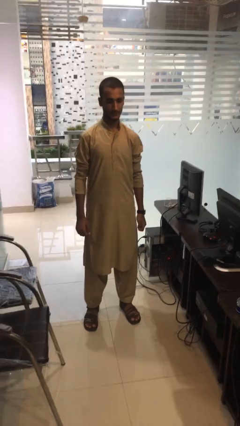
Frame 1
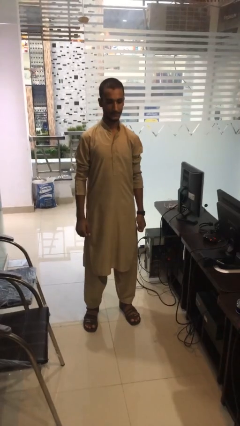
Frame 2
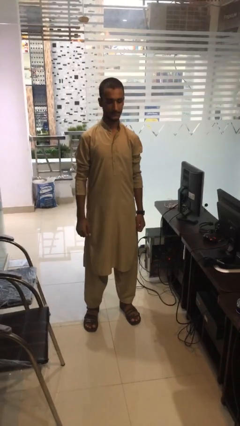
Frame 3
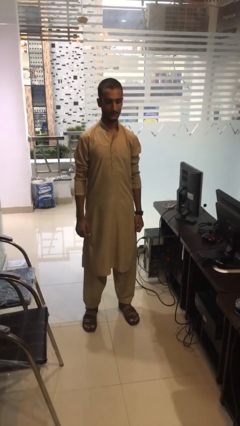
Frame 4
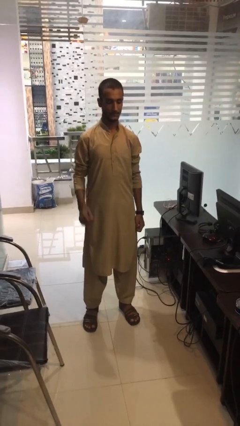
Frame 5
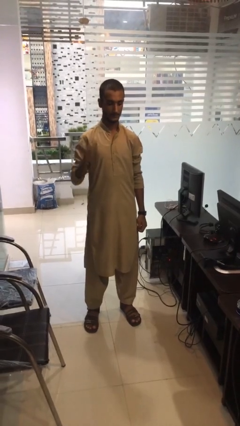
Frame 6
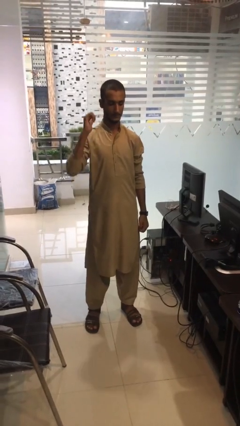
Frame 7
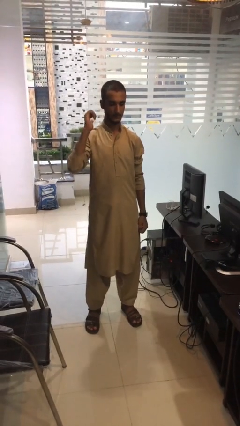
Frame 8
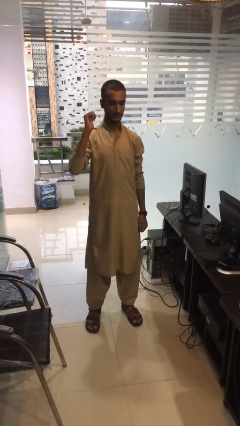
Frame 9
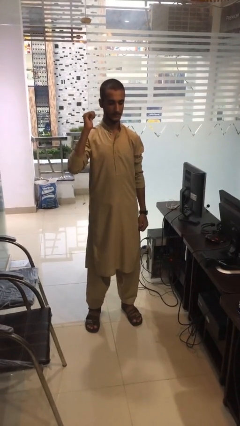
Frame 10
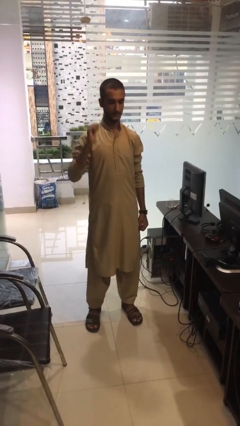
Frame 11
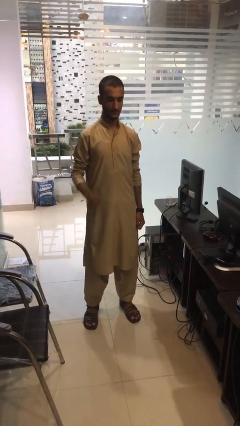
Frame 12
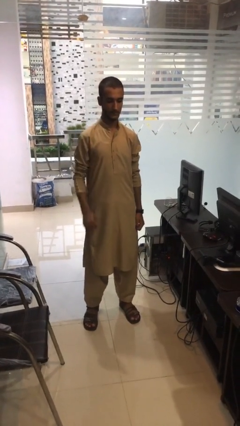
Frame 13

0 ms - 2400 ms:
person gestures behind me

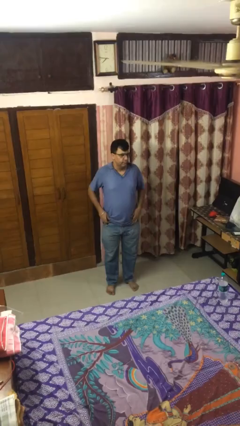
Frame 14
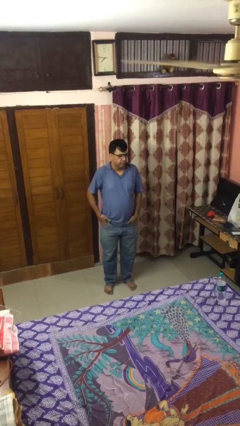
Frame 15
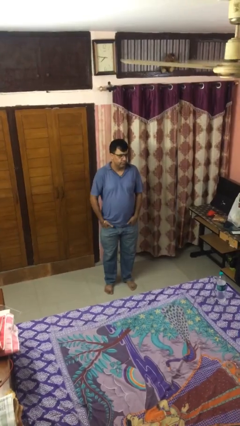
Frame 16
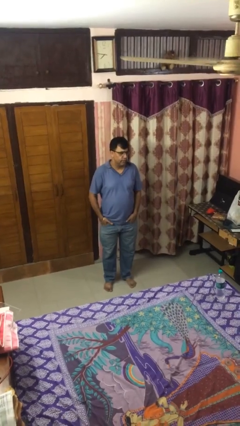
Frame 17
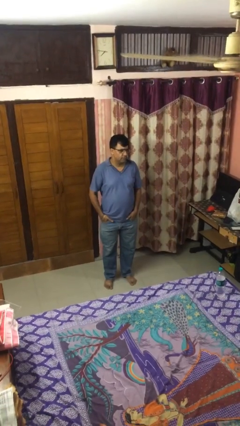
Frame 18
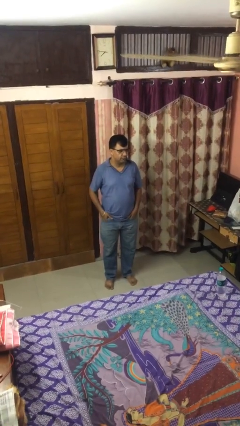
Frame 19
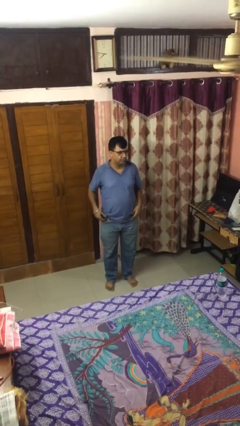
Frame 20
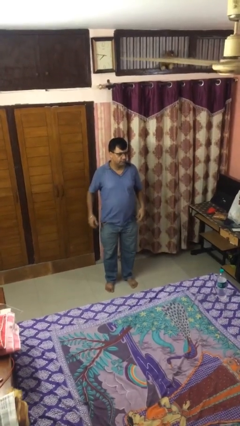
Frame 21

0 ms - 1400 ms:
person puts hands in back pockets

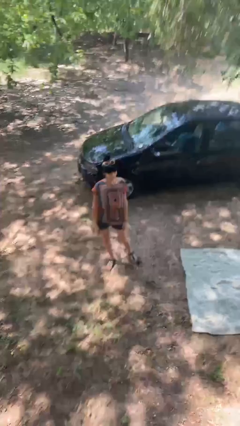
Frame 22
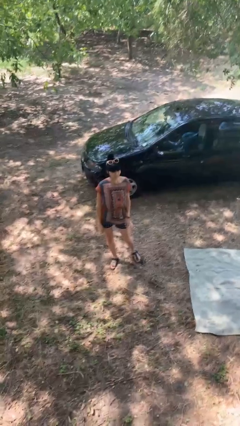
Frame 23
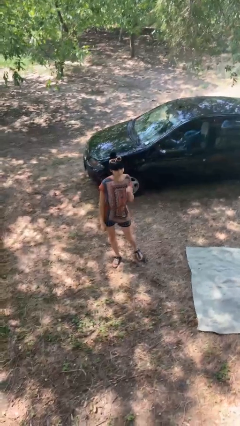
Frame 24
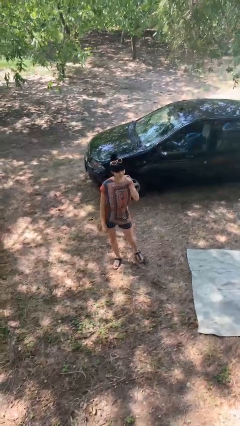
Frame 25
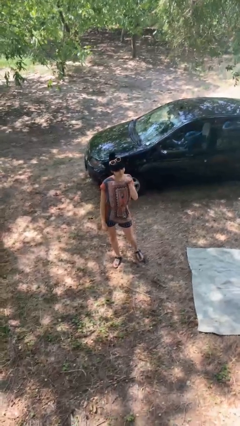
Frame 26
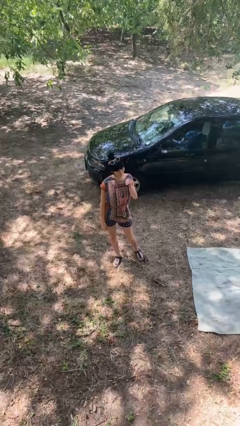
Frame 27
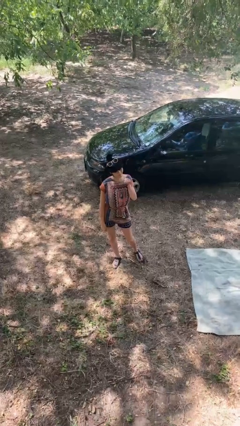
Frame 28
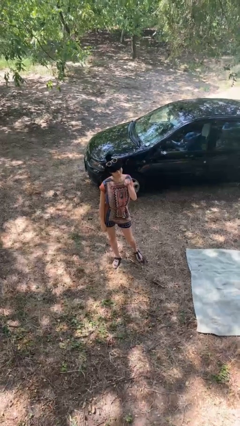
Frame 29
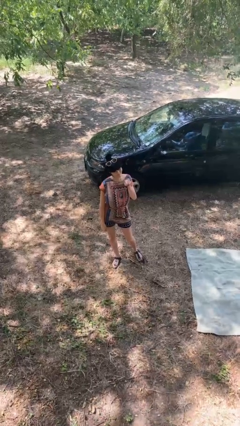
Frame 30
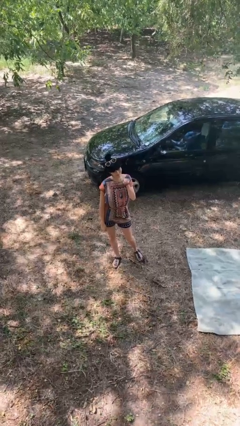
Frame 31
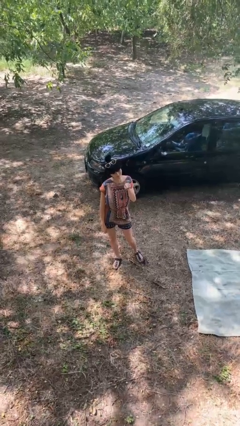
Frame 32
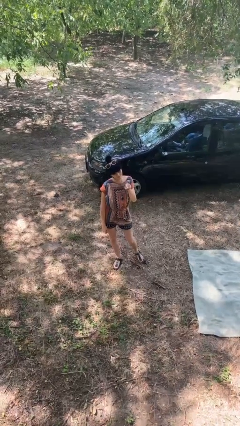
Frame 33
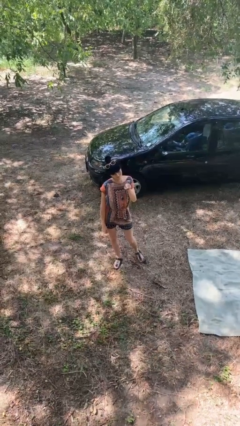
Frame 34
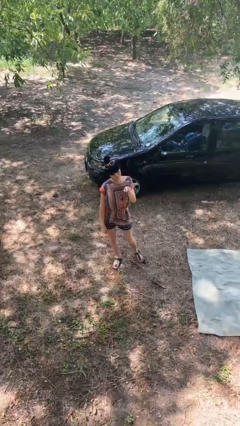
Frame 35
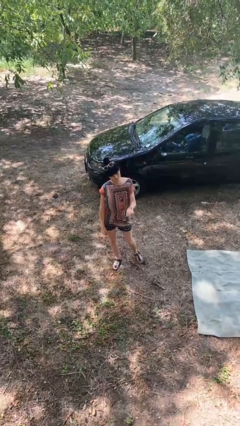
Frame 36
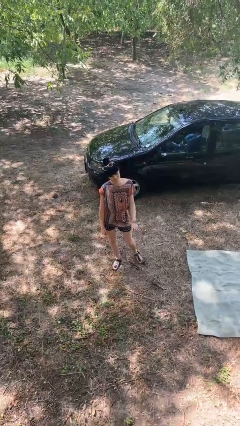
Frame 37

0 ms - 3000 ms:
person points at person

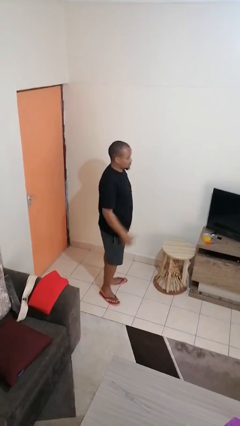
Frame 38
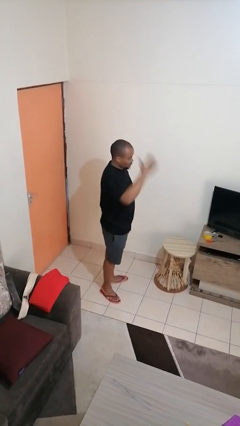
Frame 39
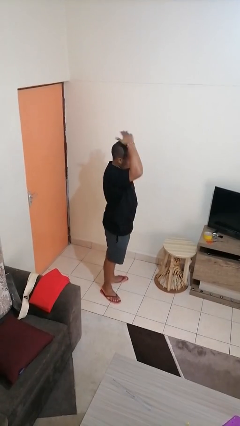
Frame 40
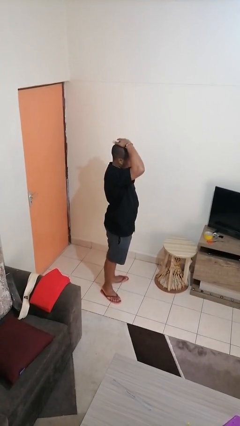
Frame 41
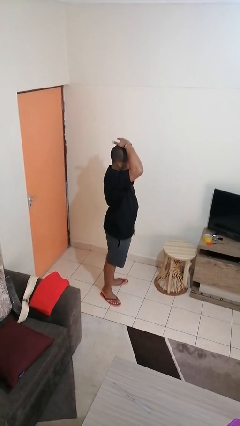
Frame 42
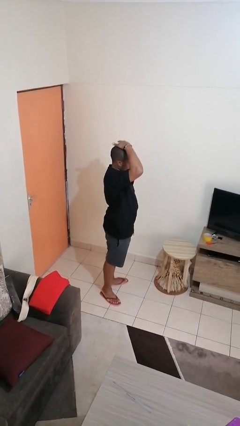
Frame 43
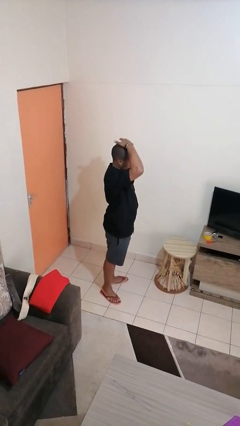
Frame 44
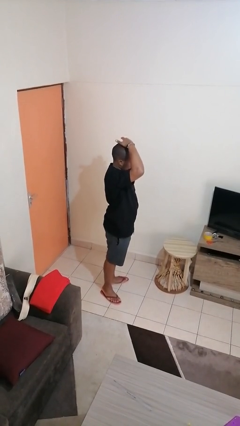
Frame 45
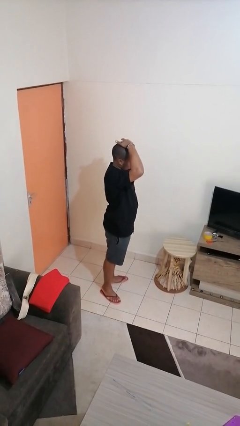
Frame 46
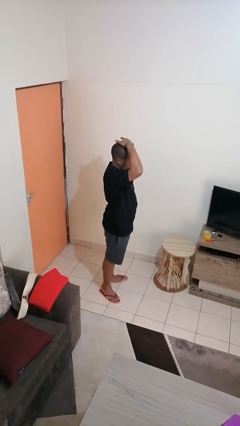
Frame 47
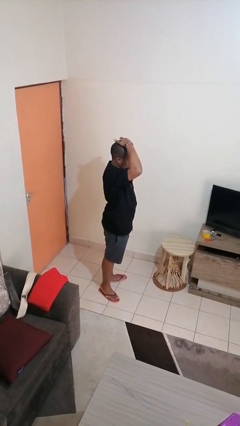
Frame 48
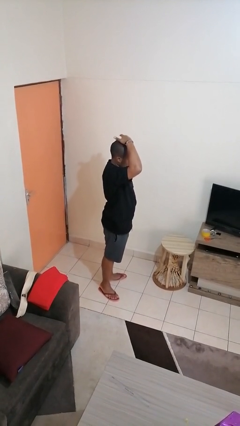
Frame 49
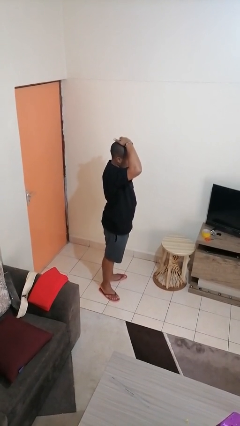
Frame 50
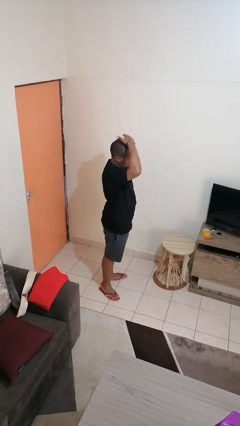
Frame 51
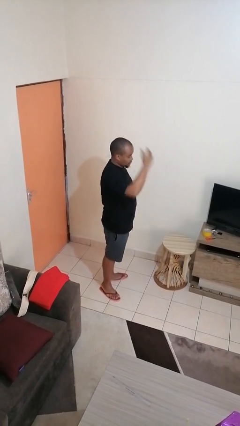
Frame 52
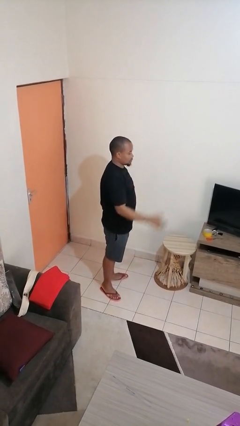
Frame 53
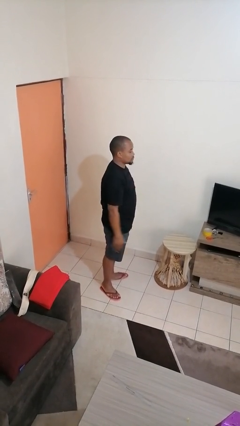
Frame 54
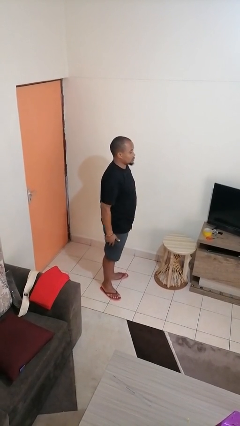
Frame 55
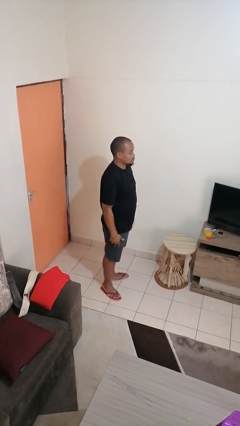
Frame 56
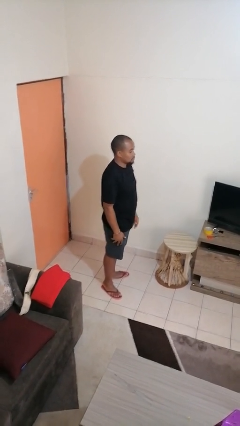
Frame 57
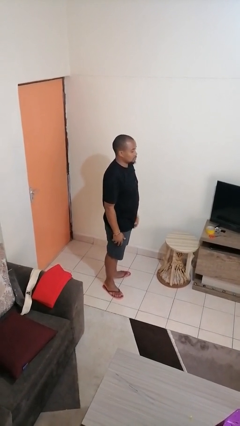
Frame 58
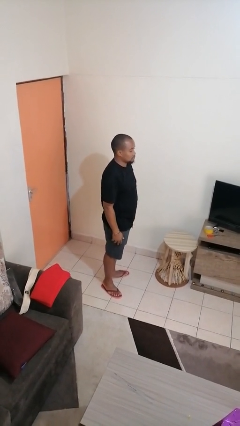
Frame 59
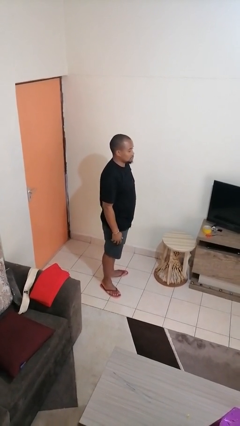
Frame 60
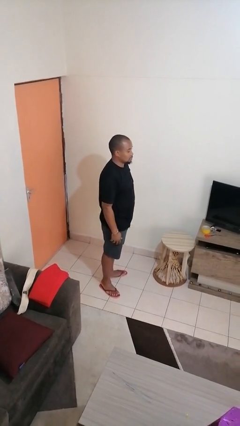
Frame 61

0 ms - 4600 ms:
person pats head

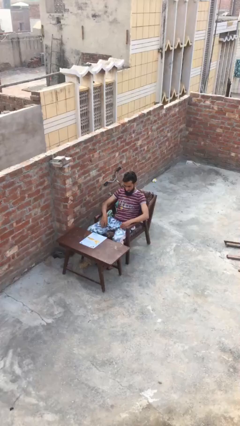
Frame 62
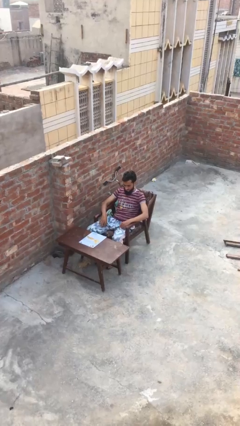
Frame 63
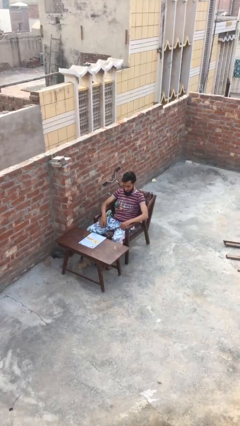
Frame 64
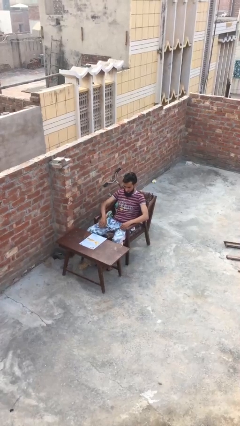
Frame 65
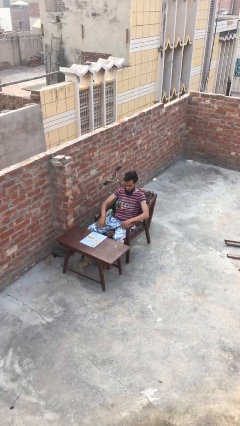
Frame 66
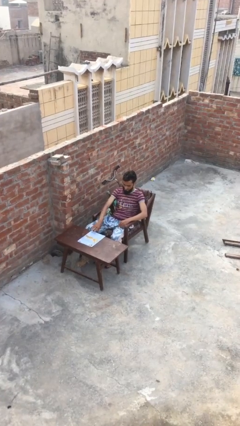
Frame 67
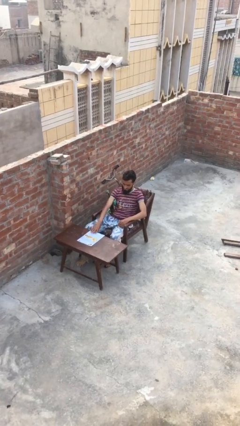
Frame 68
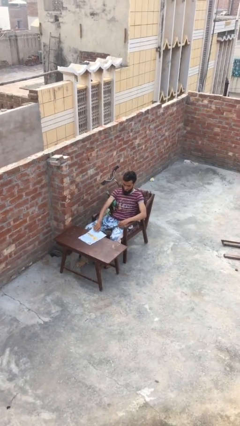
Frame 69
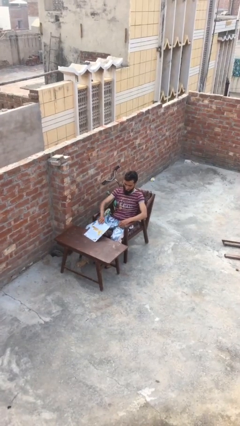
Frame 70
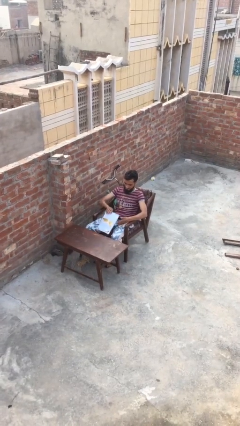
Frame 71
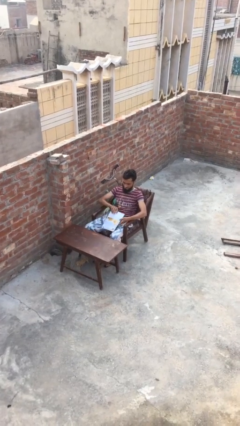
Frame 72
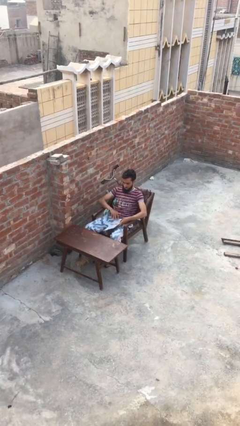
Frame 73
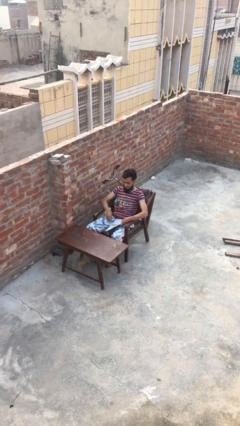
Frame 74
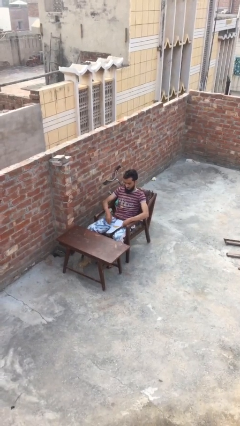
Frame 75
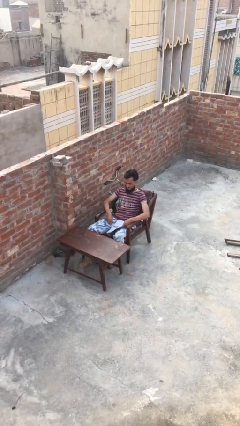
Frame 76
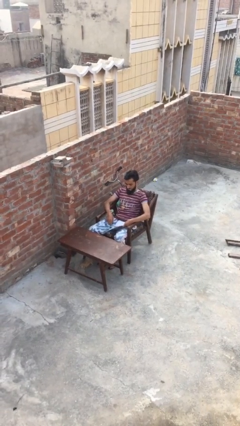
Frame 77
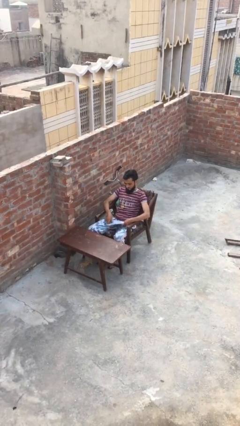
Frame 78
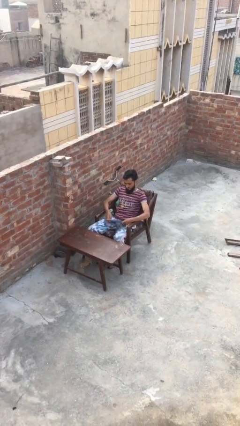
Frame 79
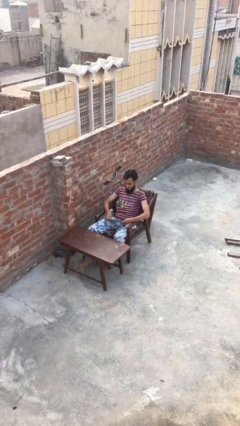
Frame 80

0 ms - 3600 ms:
person picks up object from table

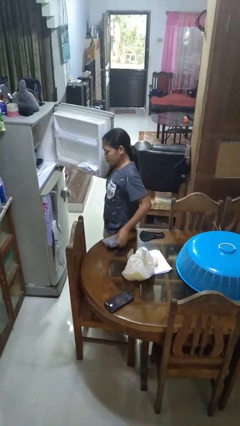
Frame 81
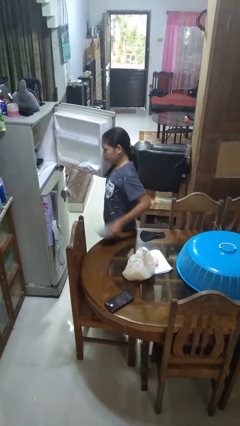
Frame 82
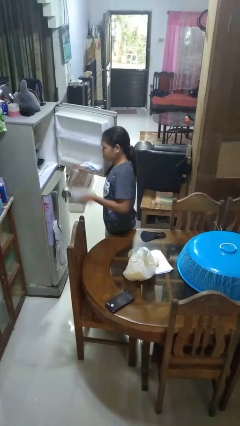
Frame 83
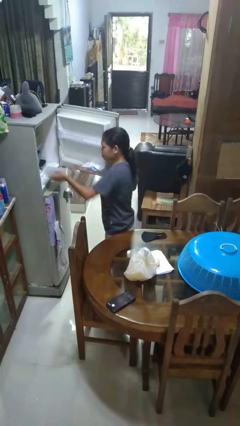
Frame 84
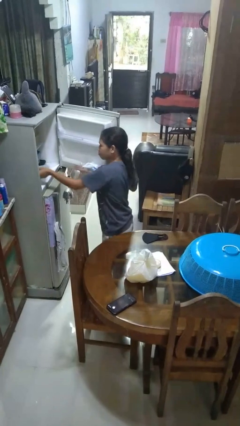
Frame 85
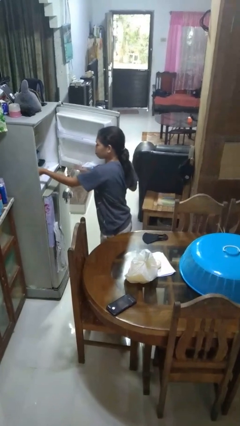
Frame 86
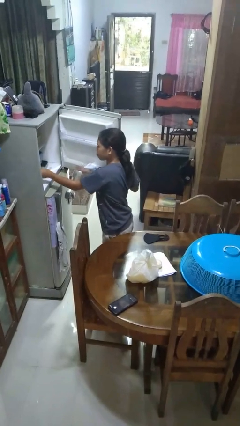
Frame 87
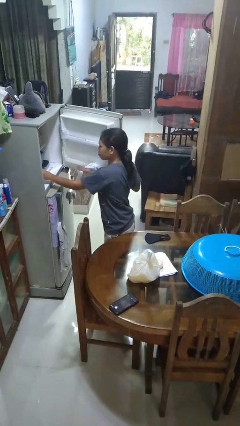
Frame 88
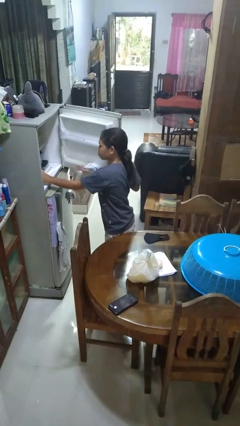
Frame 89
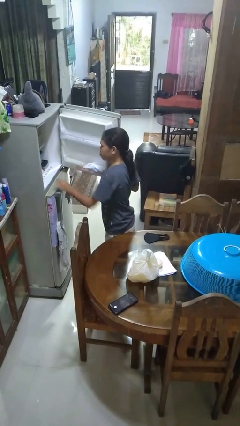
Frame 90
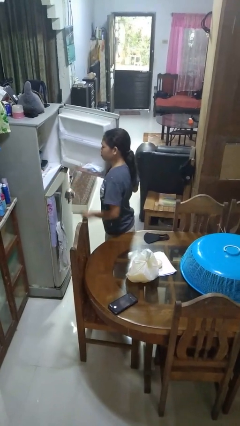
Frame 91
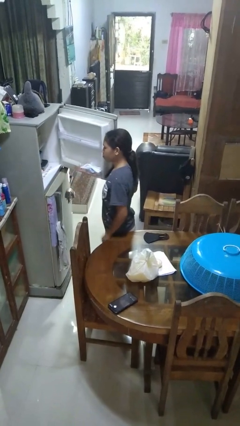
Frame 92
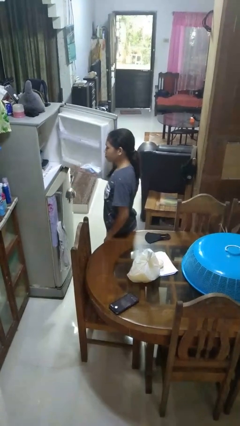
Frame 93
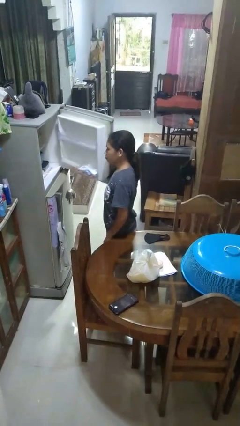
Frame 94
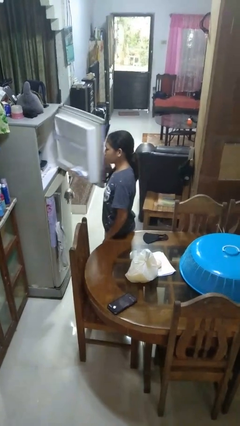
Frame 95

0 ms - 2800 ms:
person puts object into refrigerator
